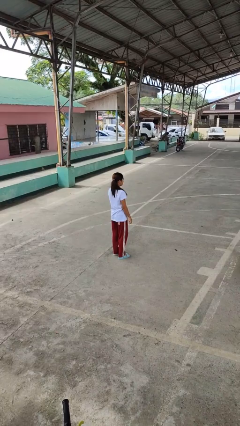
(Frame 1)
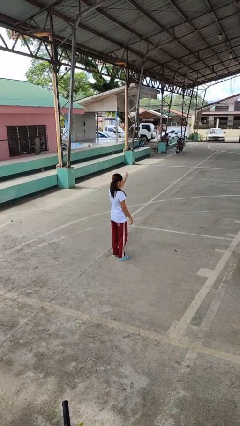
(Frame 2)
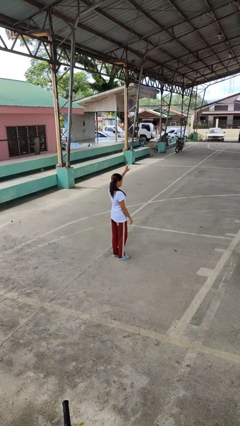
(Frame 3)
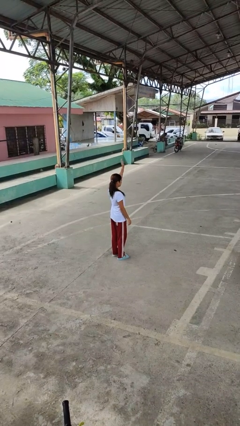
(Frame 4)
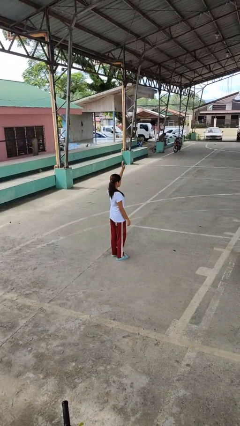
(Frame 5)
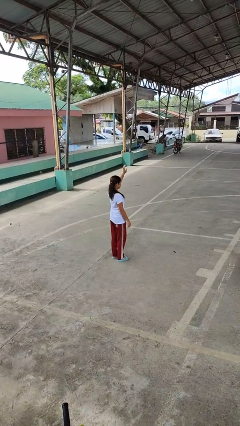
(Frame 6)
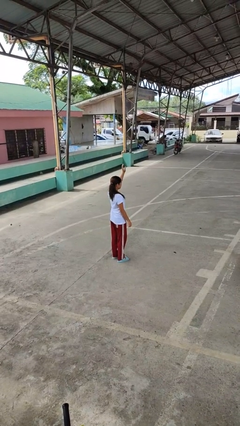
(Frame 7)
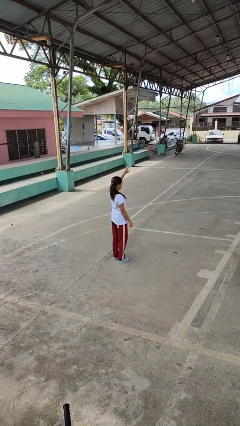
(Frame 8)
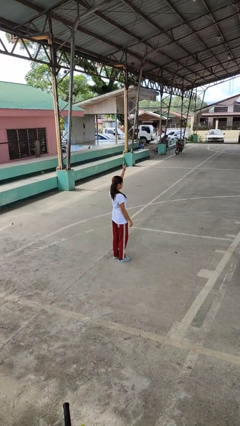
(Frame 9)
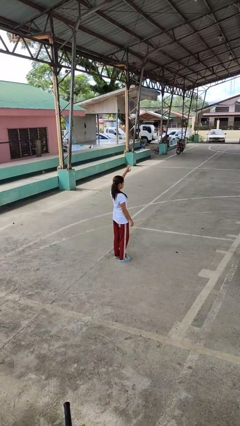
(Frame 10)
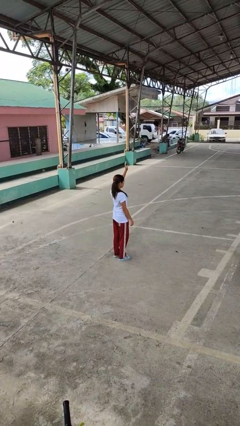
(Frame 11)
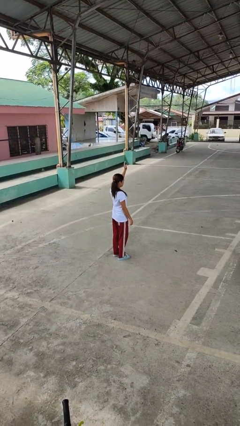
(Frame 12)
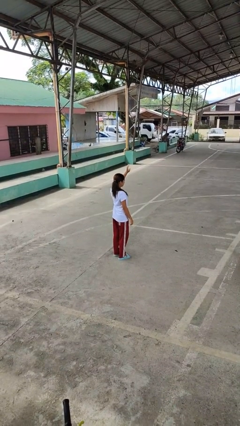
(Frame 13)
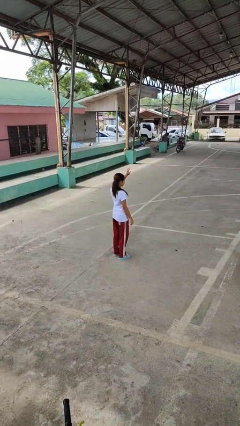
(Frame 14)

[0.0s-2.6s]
person waves at person

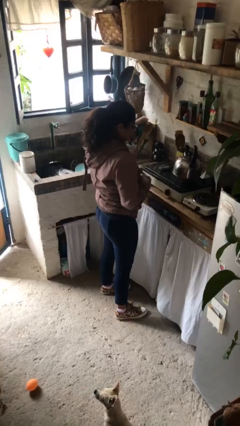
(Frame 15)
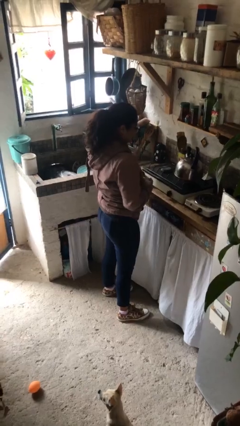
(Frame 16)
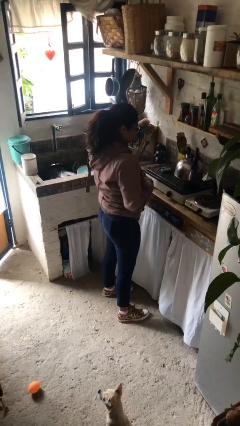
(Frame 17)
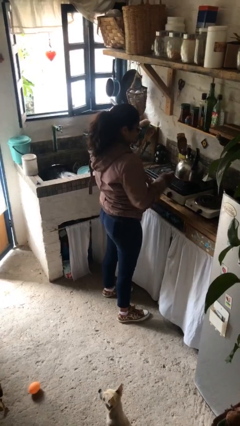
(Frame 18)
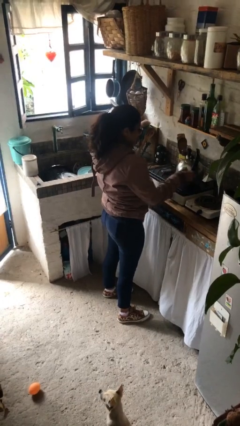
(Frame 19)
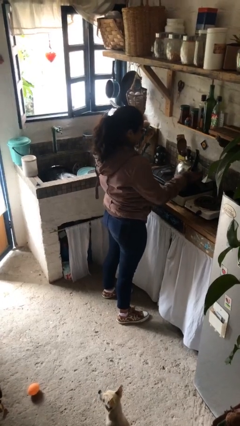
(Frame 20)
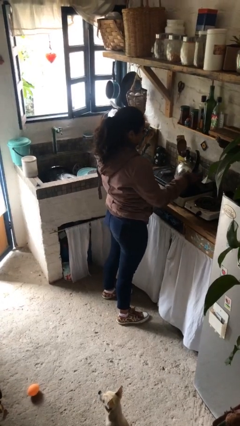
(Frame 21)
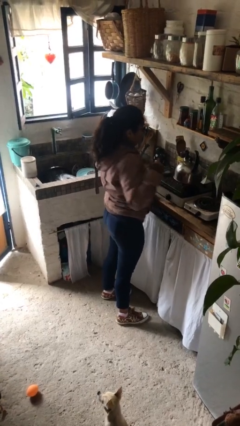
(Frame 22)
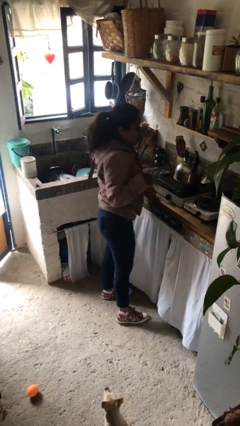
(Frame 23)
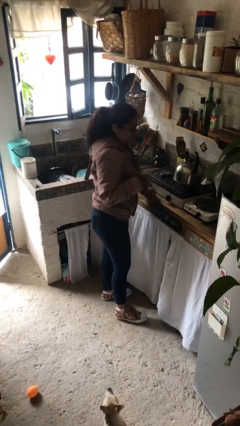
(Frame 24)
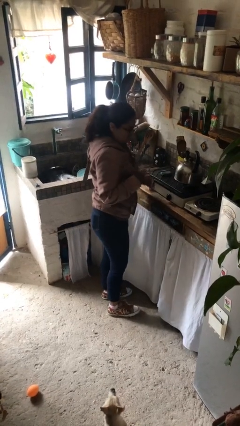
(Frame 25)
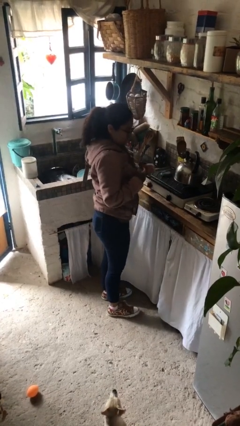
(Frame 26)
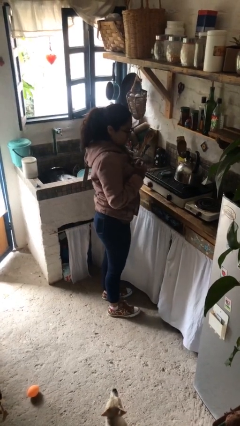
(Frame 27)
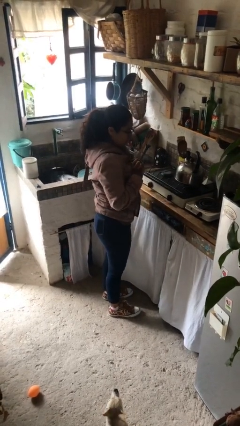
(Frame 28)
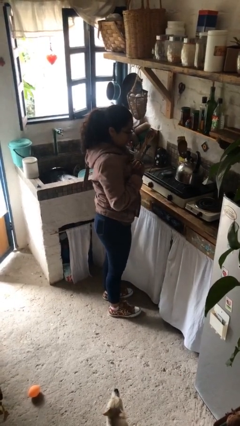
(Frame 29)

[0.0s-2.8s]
person burns hand

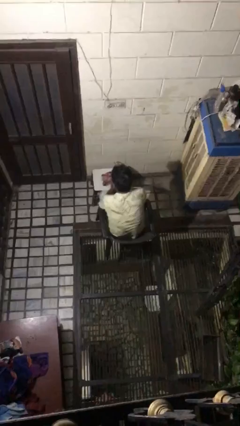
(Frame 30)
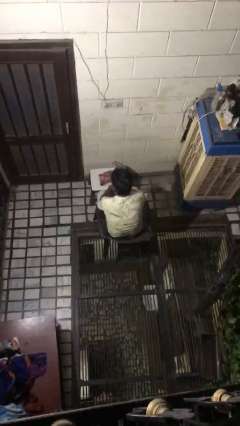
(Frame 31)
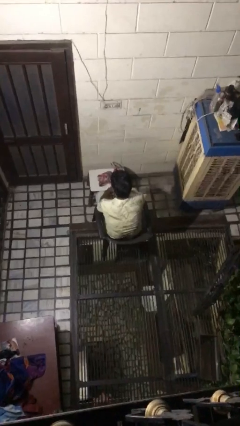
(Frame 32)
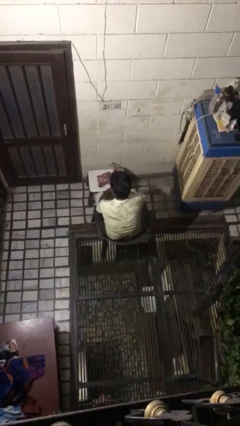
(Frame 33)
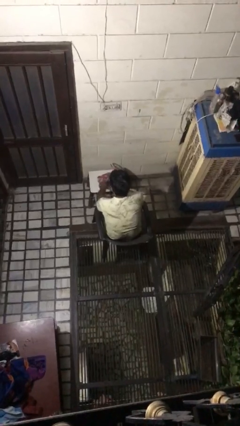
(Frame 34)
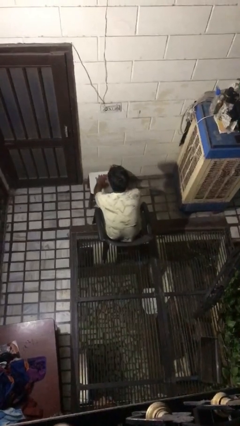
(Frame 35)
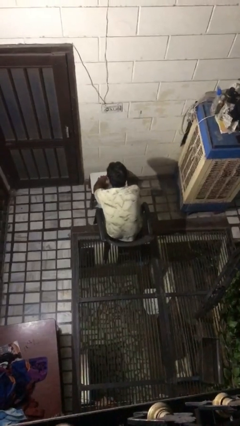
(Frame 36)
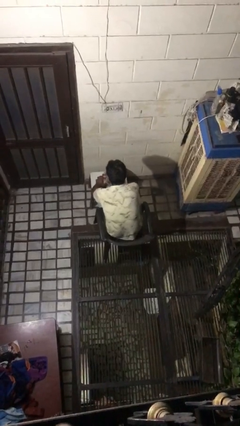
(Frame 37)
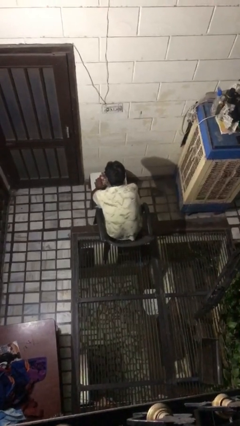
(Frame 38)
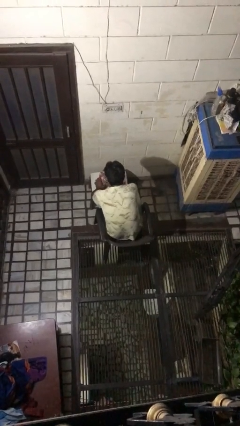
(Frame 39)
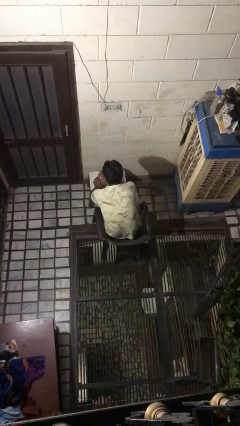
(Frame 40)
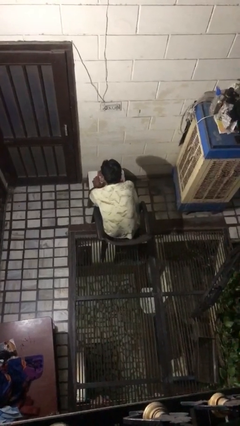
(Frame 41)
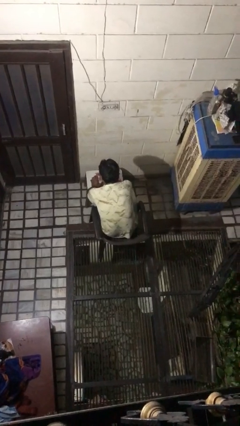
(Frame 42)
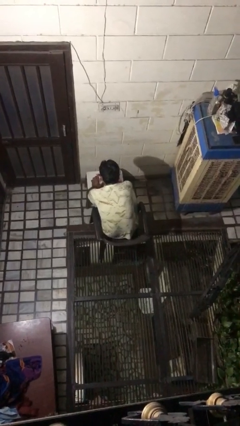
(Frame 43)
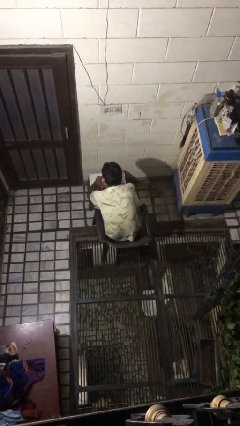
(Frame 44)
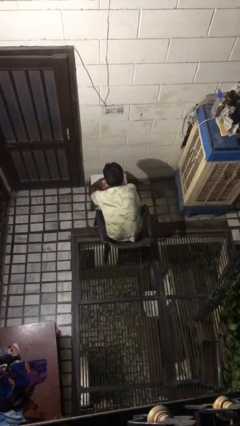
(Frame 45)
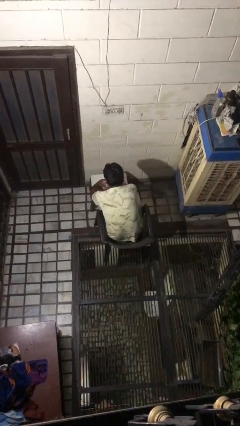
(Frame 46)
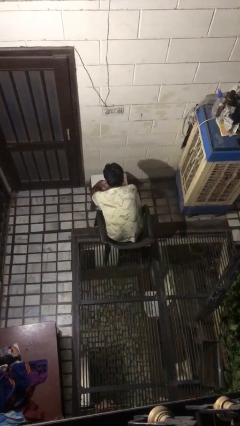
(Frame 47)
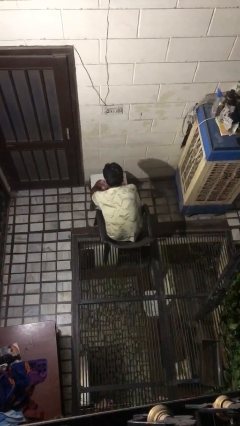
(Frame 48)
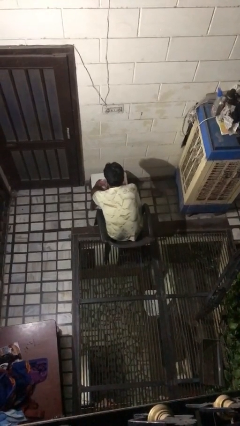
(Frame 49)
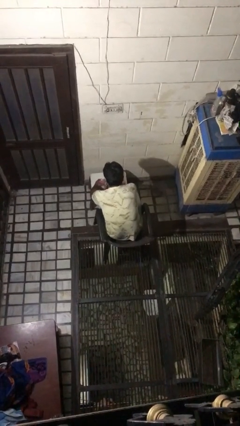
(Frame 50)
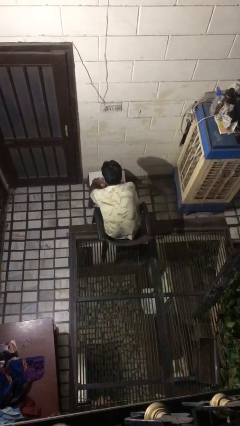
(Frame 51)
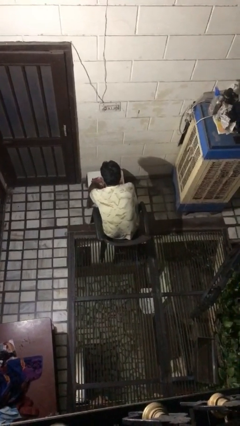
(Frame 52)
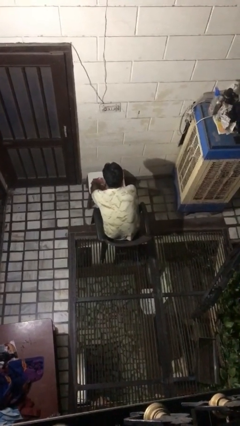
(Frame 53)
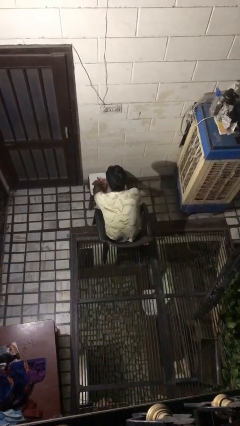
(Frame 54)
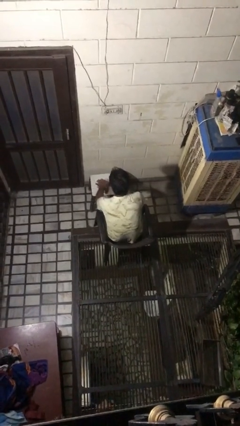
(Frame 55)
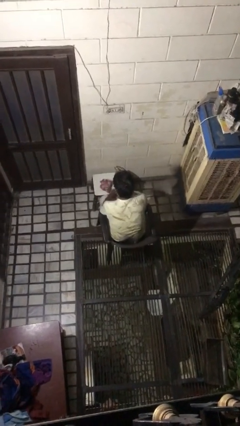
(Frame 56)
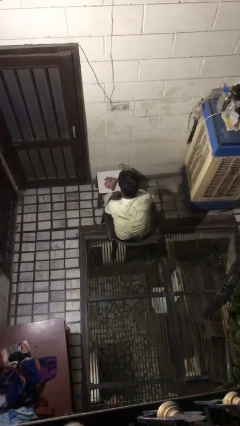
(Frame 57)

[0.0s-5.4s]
person wraps box

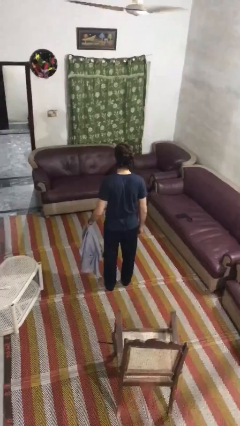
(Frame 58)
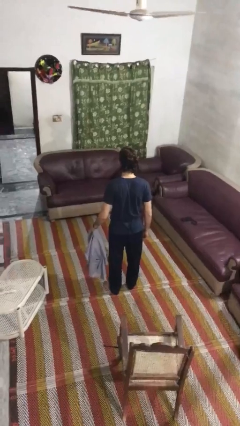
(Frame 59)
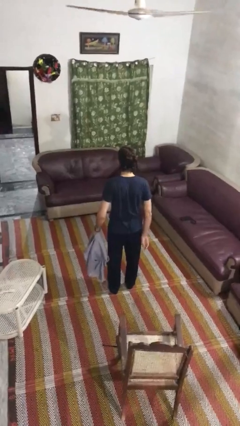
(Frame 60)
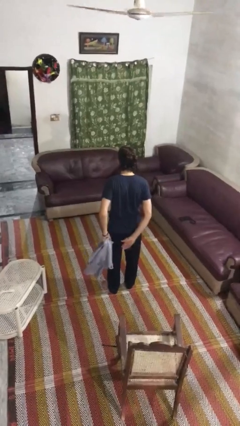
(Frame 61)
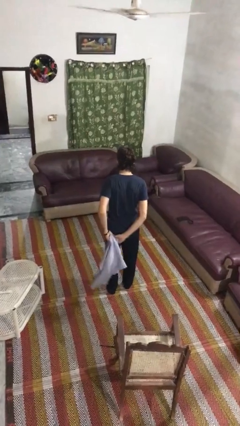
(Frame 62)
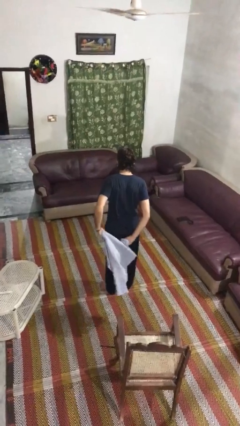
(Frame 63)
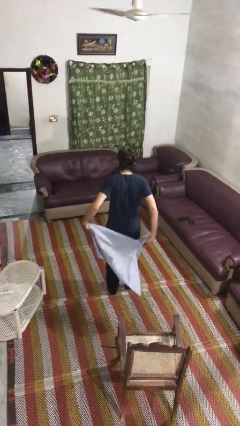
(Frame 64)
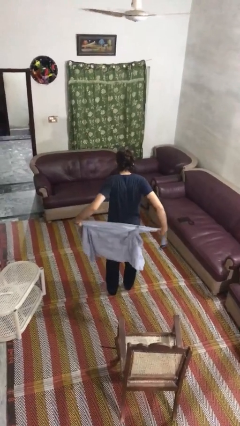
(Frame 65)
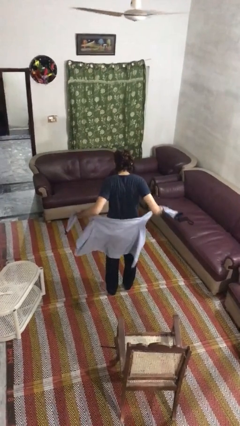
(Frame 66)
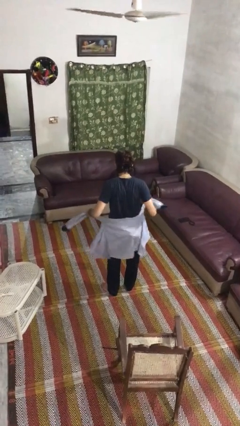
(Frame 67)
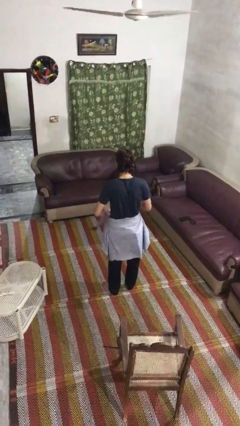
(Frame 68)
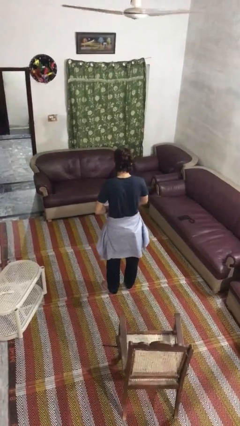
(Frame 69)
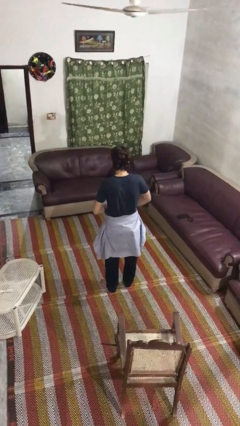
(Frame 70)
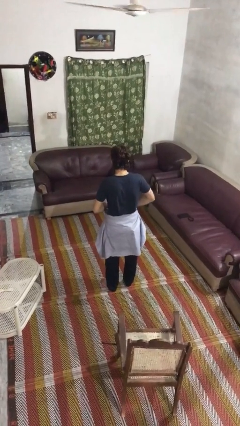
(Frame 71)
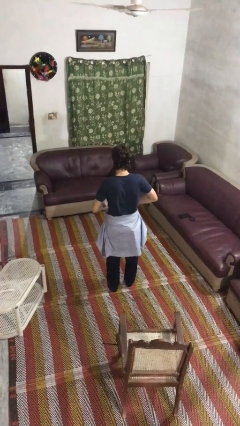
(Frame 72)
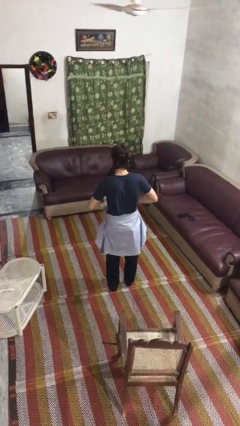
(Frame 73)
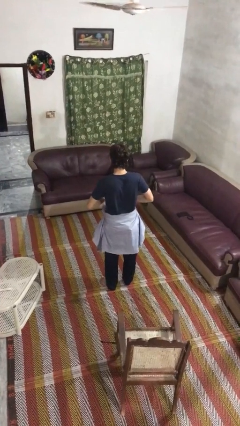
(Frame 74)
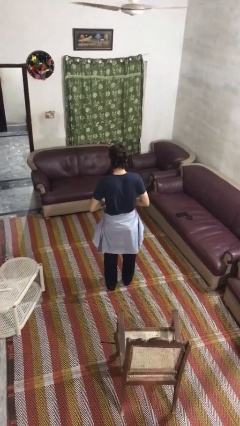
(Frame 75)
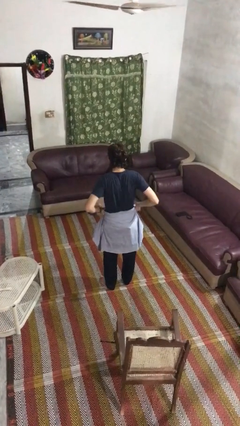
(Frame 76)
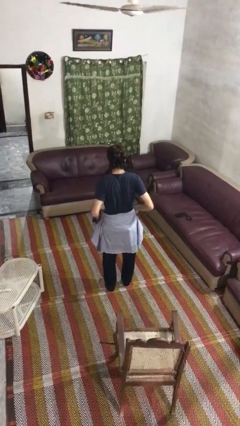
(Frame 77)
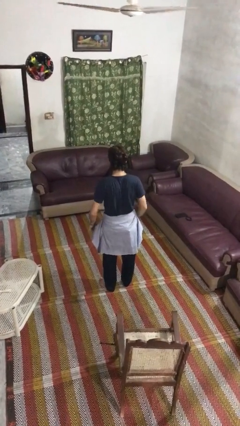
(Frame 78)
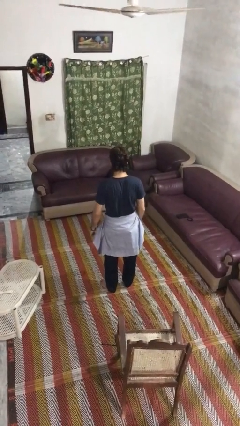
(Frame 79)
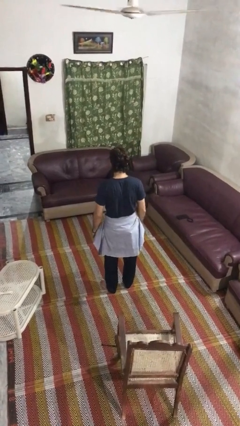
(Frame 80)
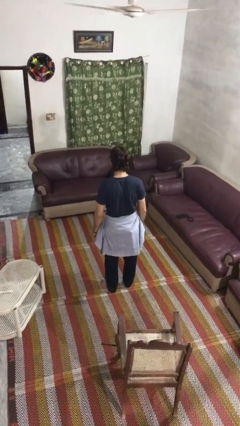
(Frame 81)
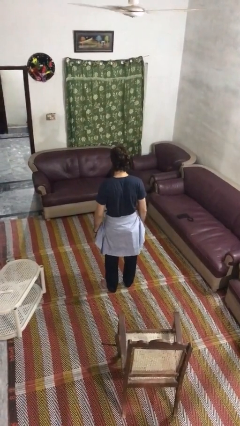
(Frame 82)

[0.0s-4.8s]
person ties jacket around waist

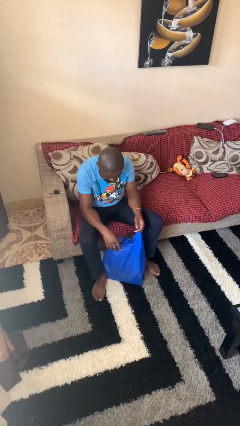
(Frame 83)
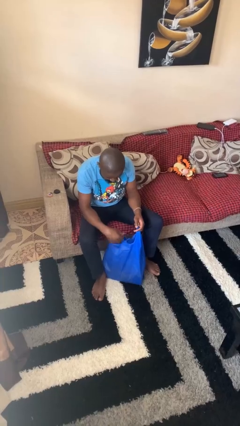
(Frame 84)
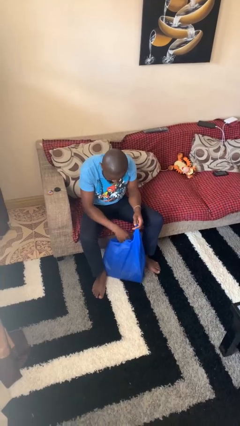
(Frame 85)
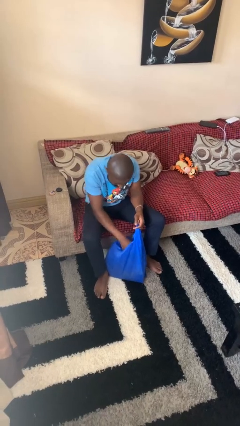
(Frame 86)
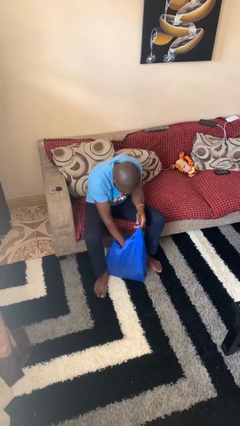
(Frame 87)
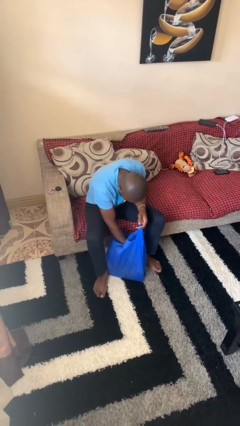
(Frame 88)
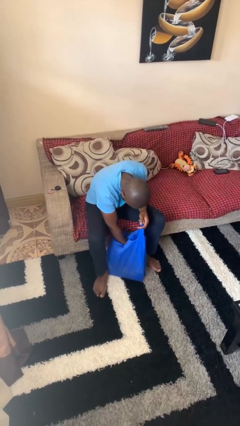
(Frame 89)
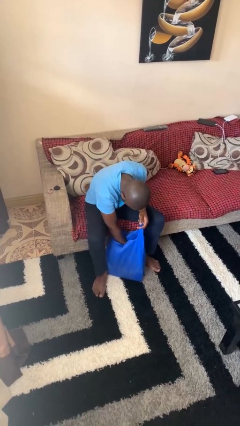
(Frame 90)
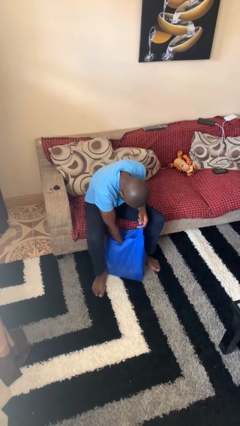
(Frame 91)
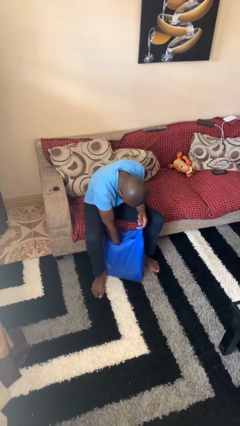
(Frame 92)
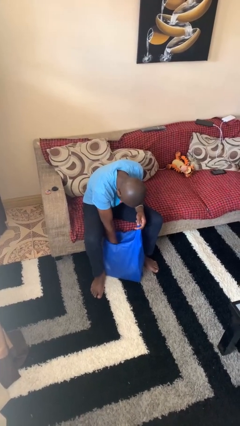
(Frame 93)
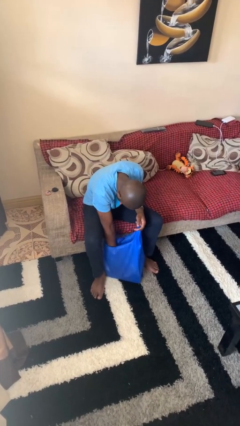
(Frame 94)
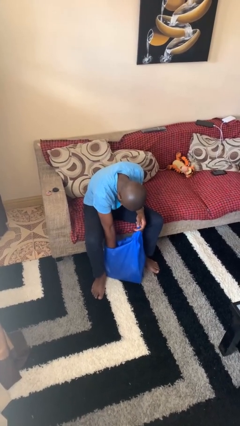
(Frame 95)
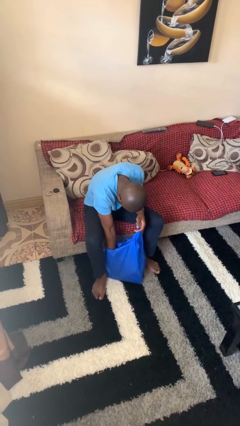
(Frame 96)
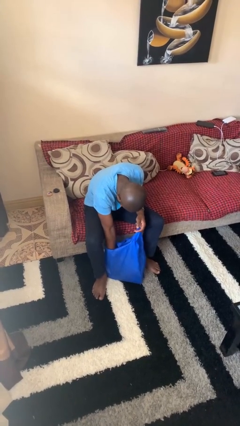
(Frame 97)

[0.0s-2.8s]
person searches in bag
